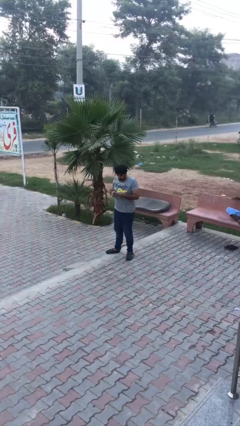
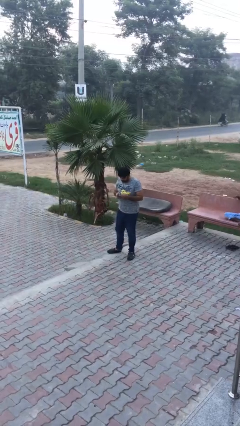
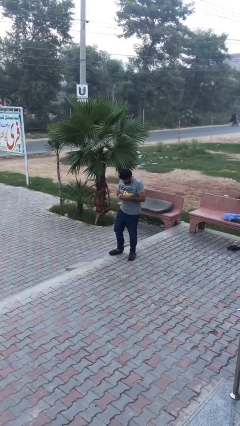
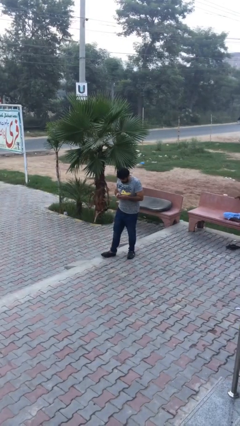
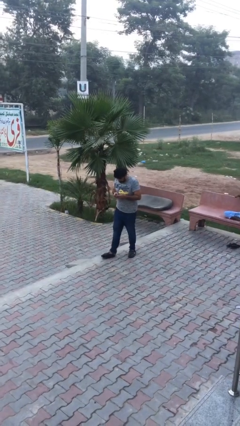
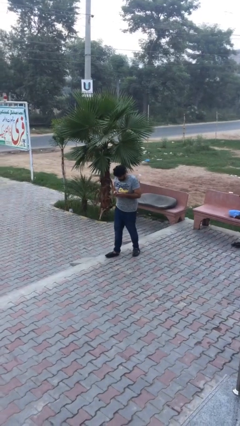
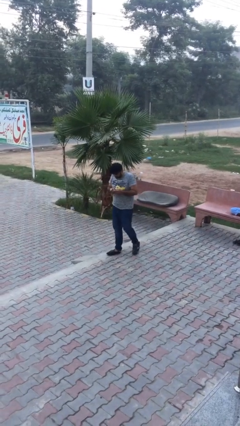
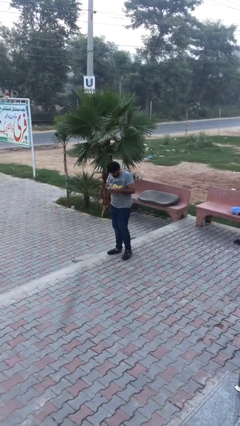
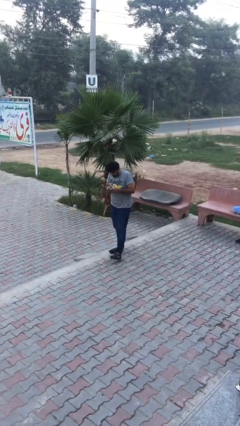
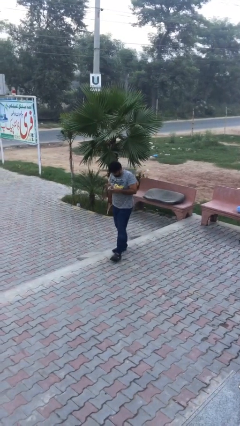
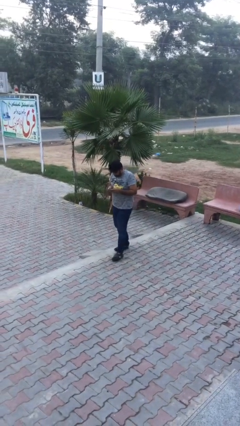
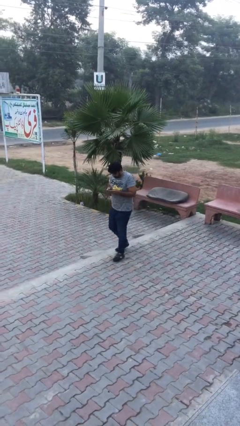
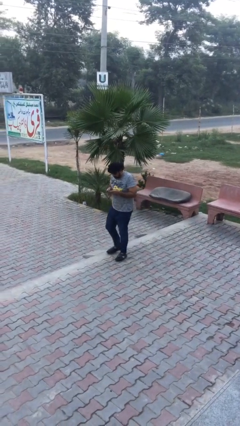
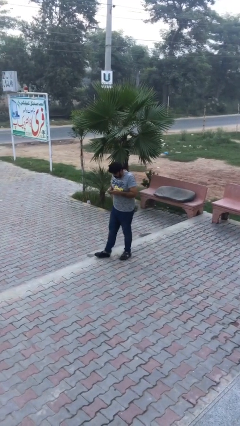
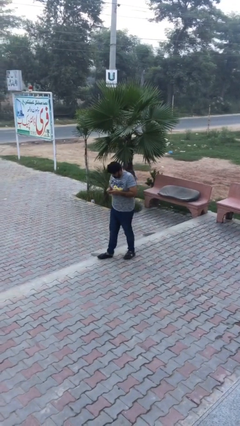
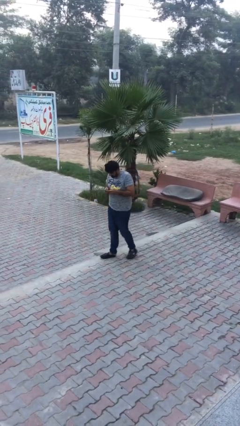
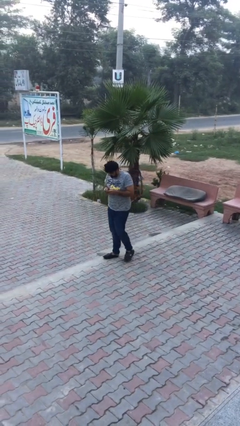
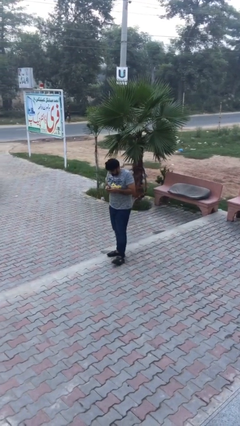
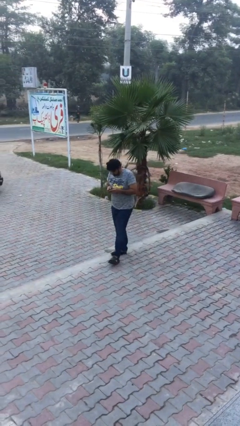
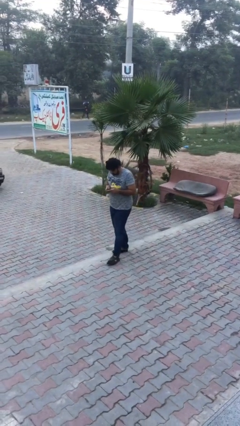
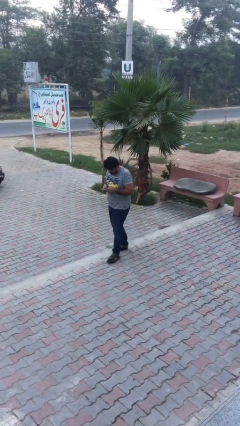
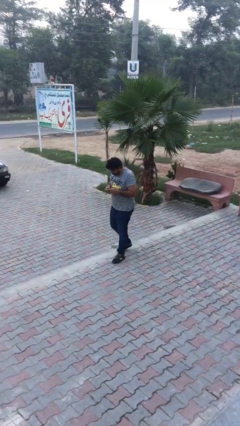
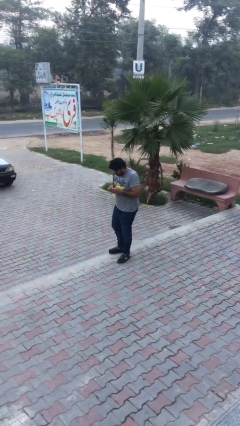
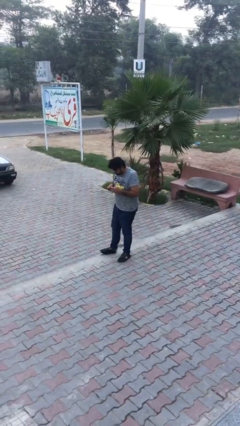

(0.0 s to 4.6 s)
person texts on phone

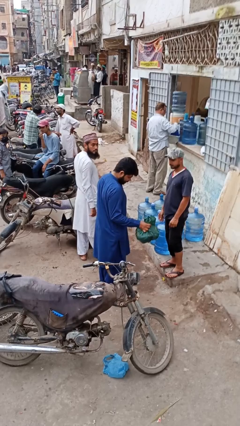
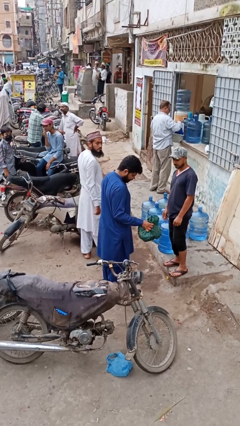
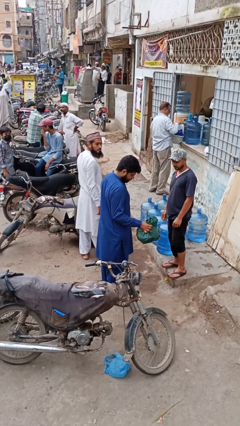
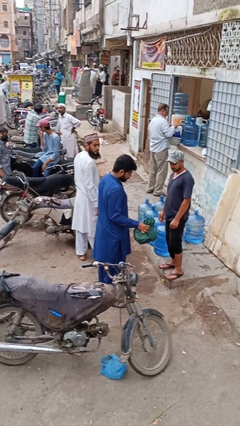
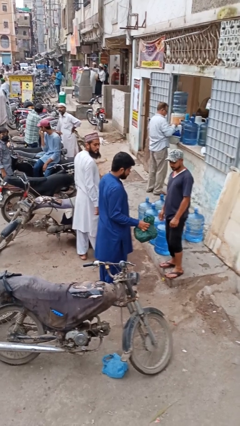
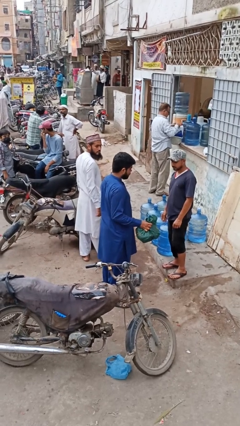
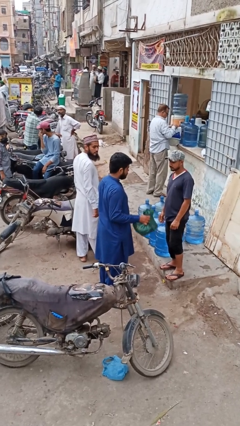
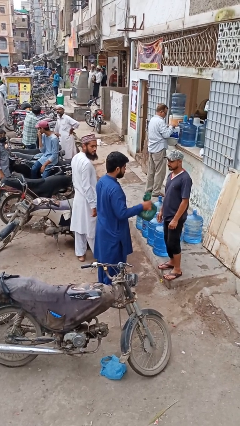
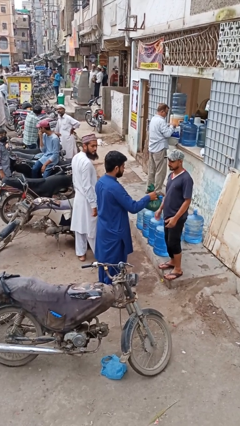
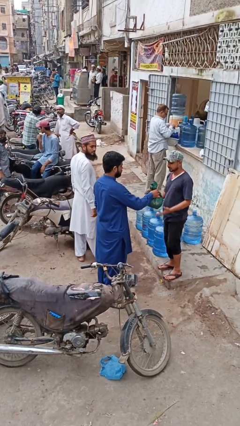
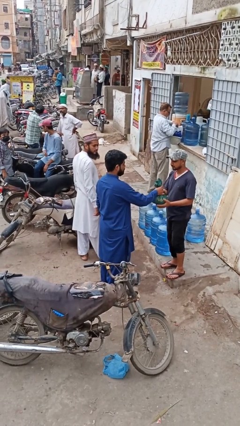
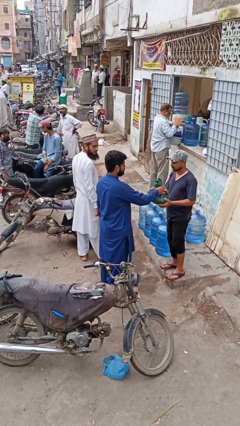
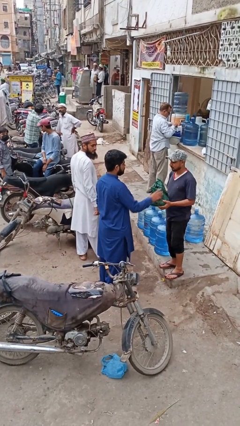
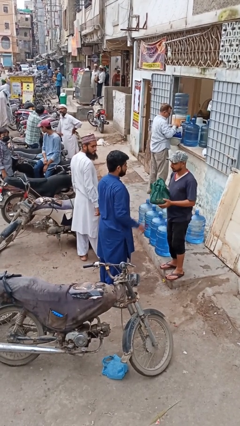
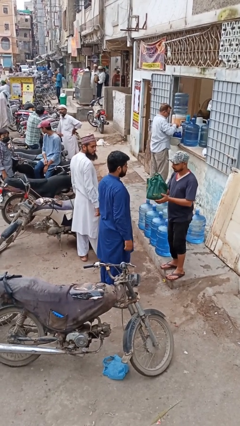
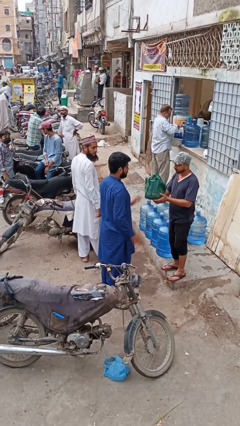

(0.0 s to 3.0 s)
person transfers object to person

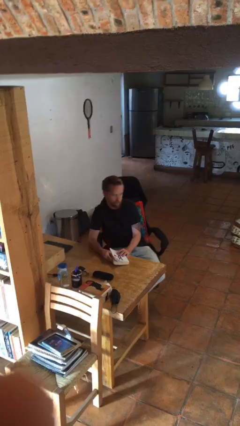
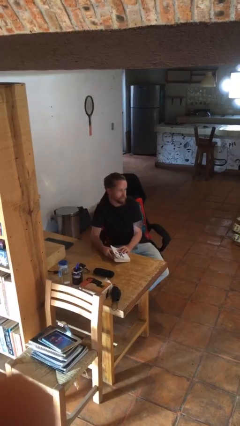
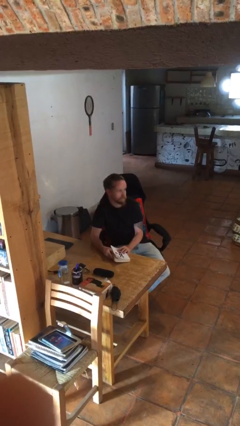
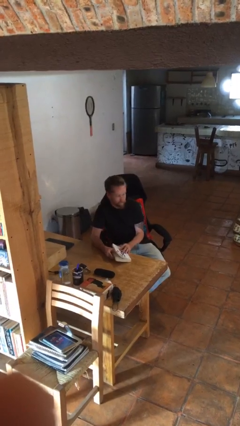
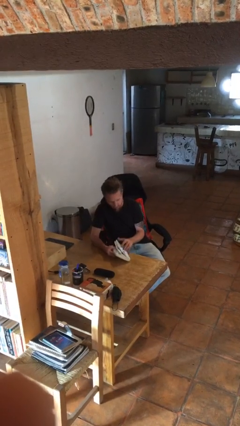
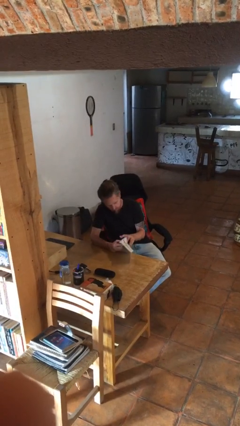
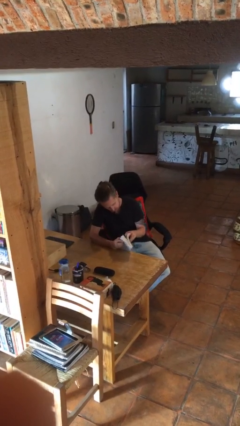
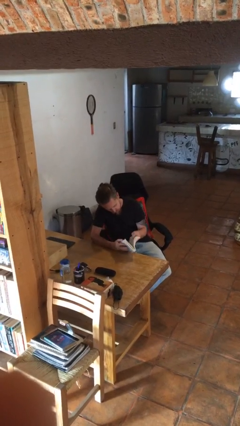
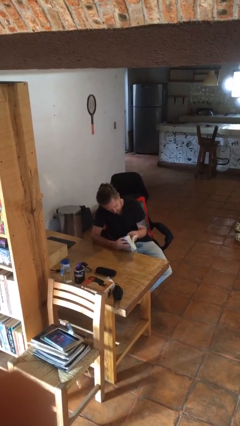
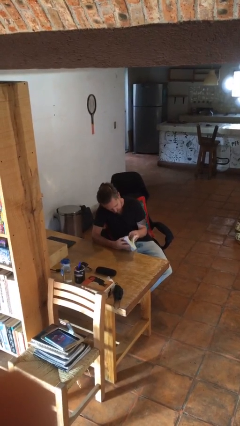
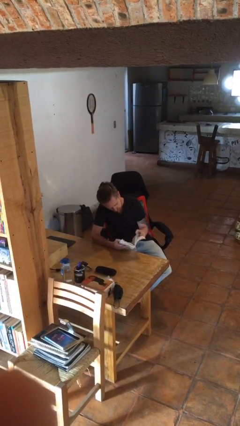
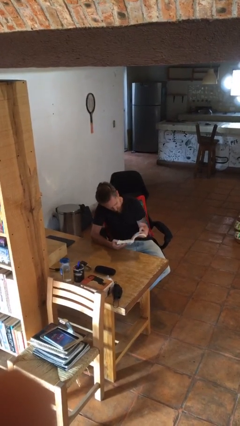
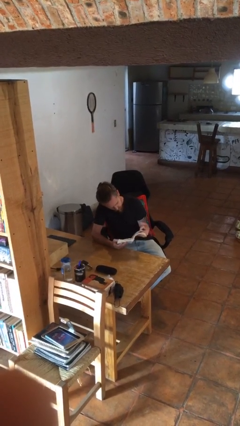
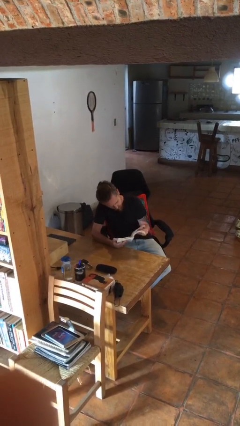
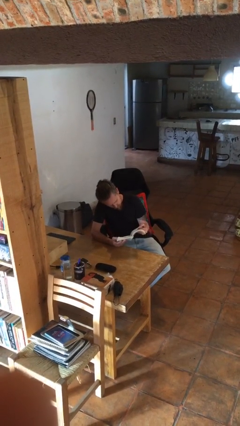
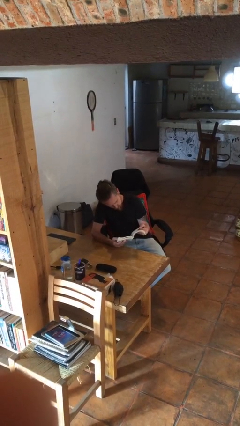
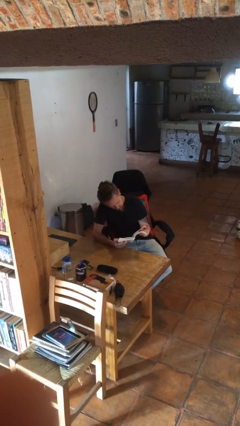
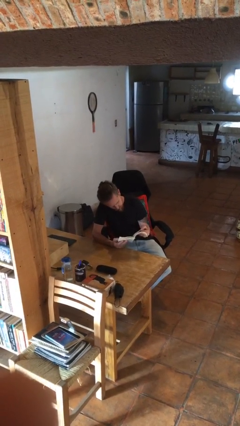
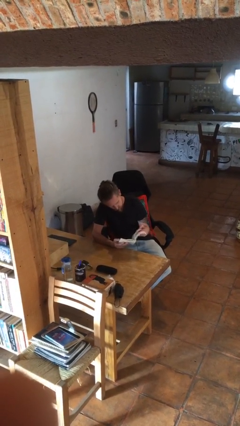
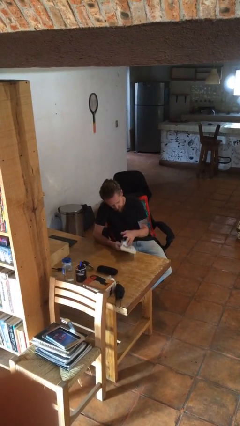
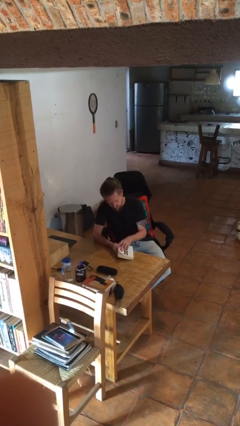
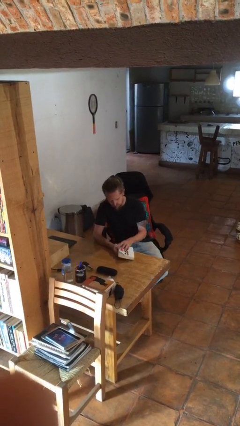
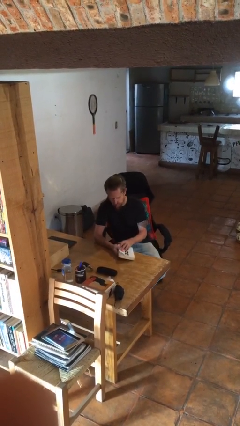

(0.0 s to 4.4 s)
person reads book

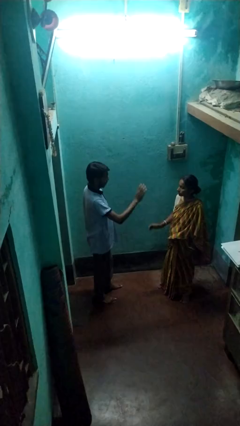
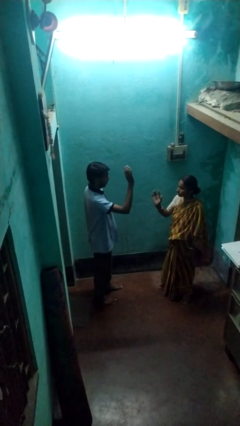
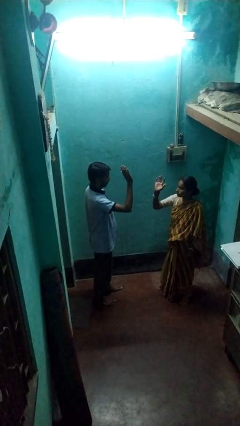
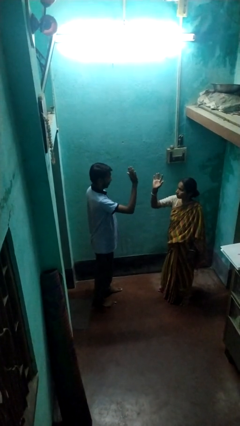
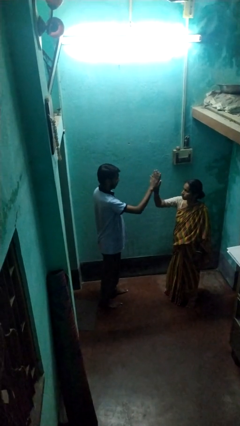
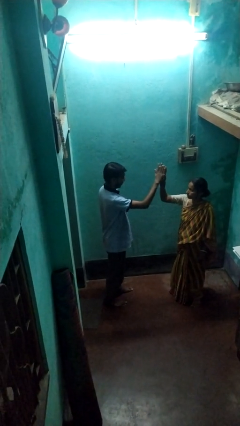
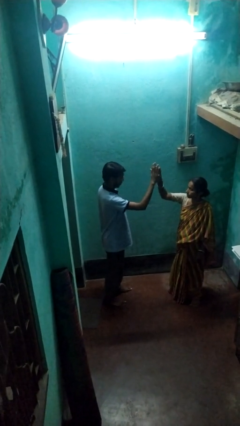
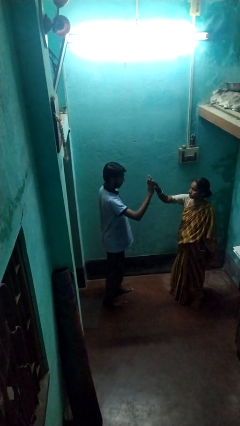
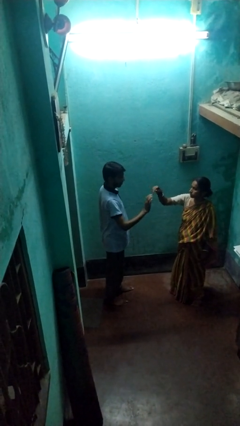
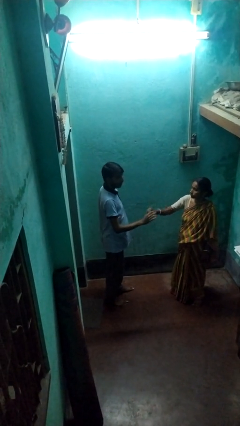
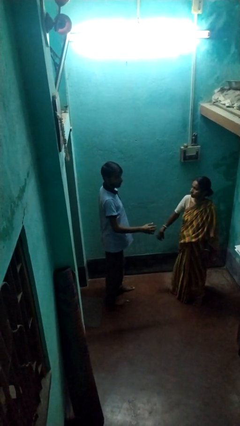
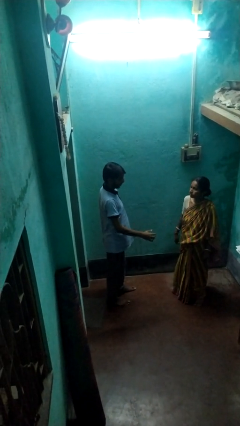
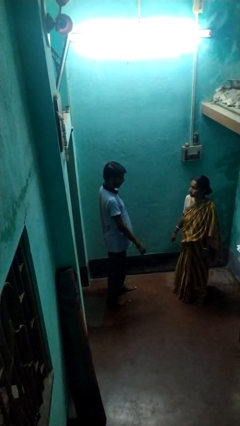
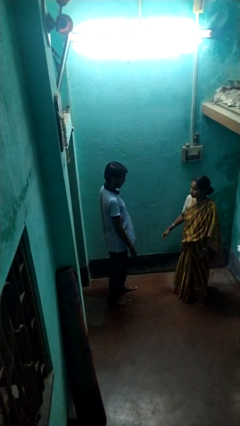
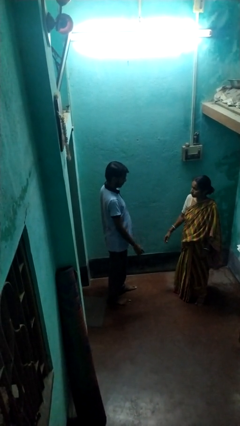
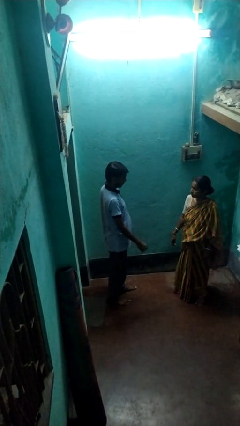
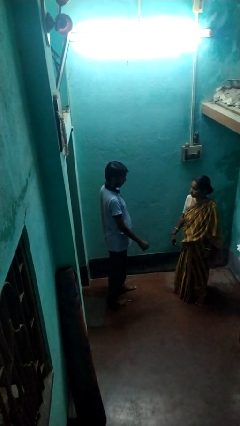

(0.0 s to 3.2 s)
person highfives hand

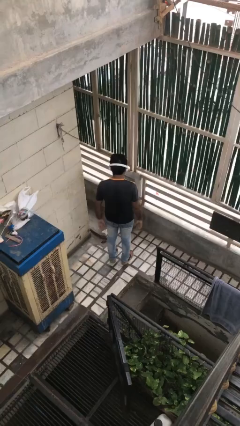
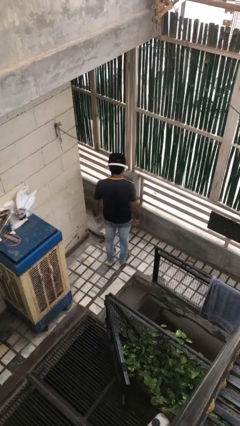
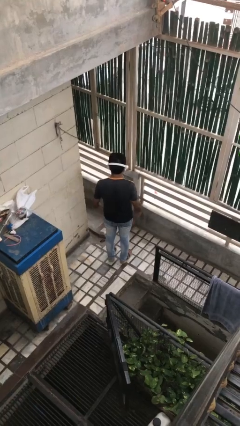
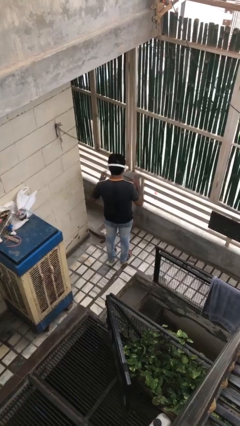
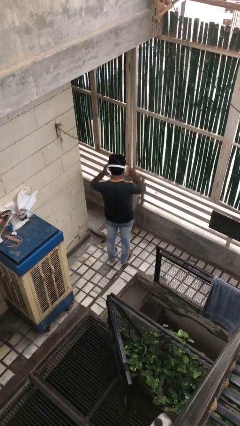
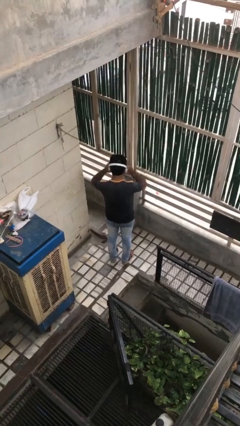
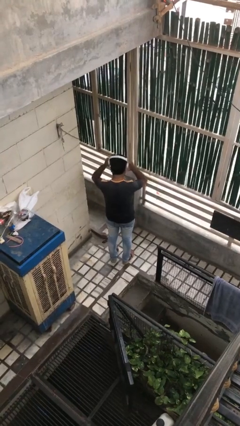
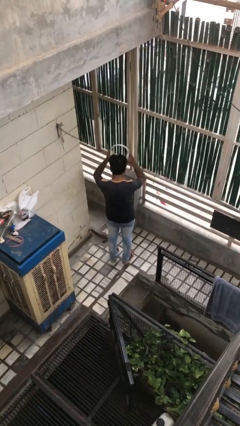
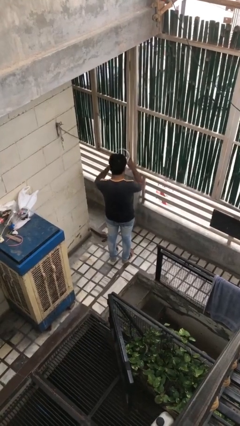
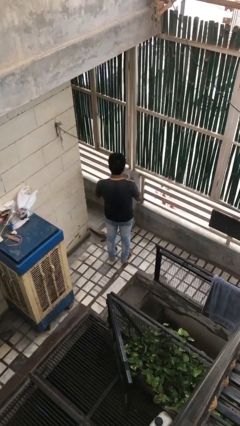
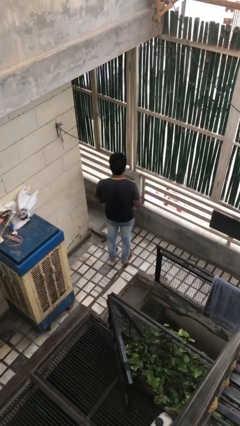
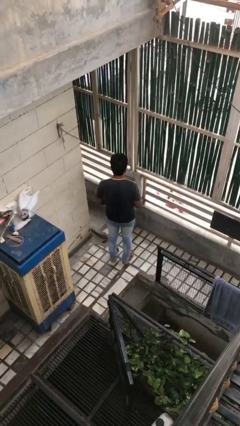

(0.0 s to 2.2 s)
person takes off headphones

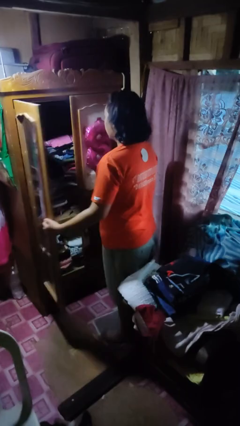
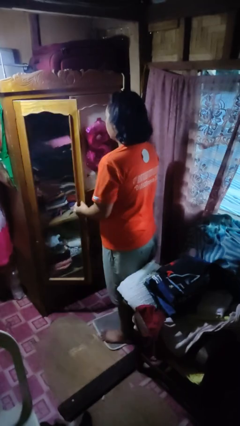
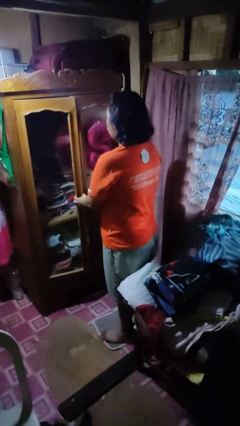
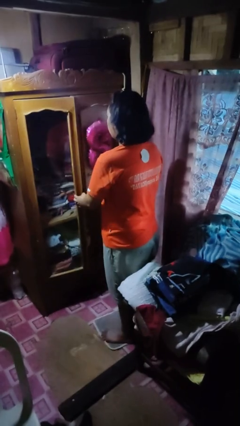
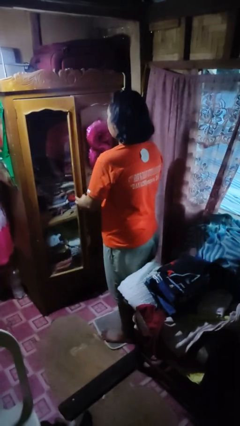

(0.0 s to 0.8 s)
person closes closet door
